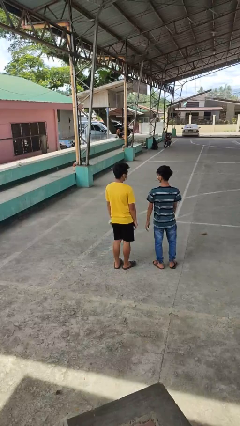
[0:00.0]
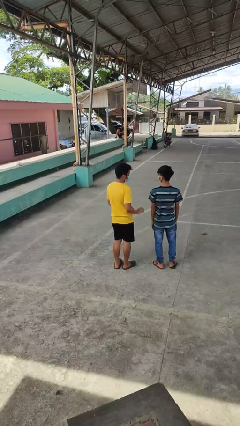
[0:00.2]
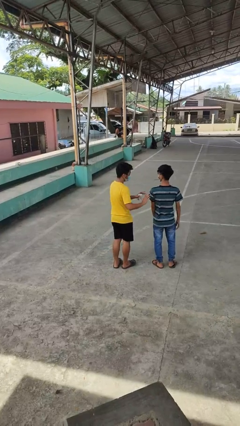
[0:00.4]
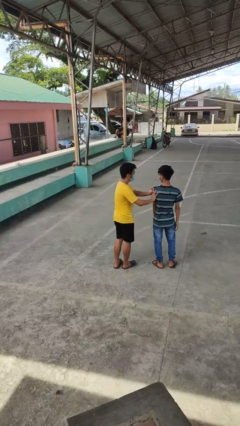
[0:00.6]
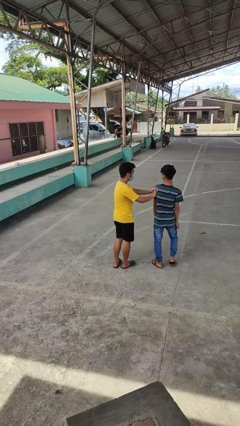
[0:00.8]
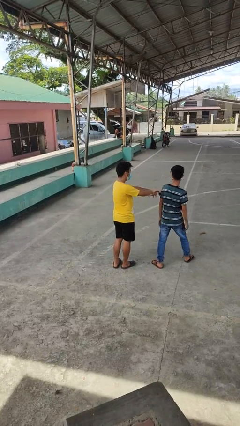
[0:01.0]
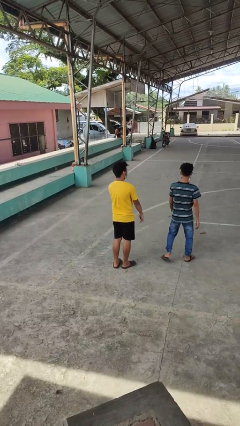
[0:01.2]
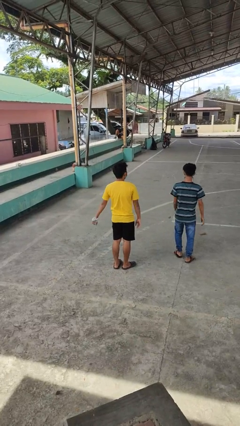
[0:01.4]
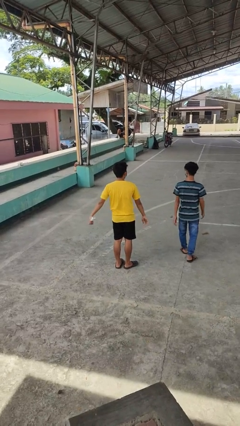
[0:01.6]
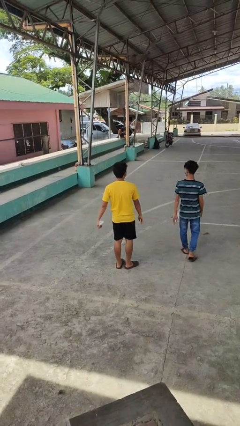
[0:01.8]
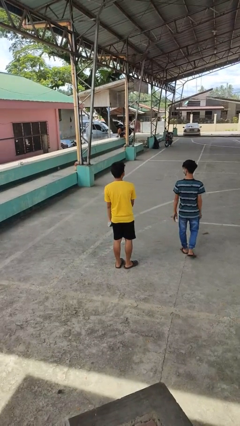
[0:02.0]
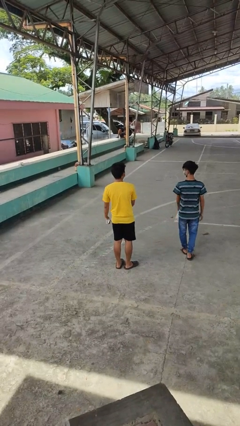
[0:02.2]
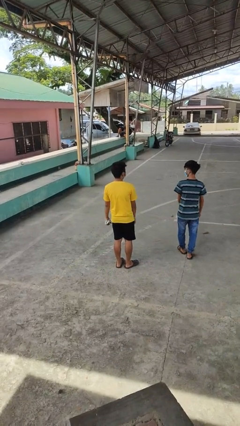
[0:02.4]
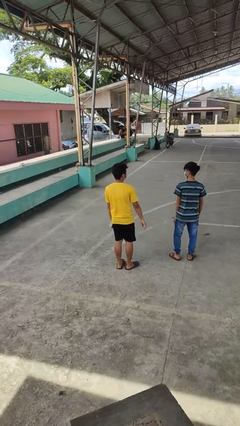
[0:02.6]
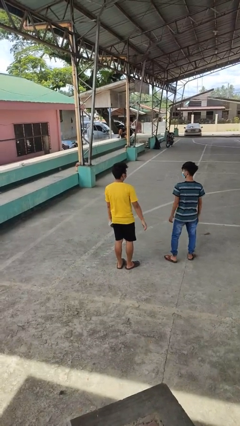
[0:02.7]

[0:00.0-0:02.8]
person shoves person

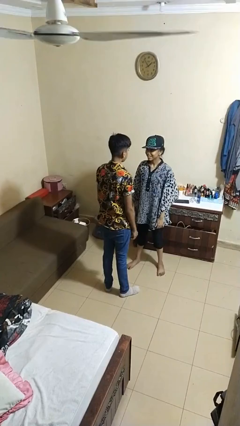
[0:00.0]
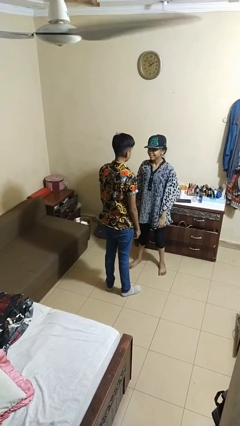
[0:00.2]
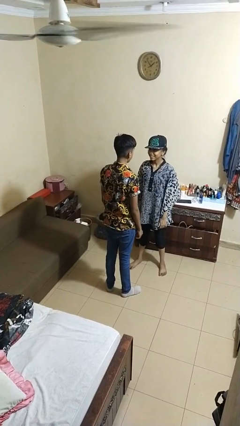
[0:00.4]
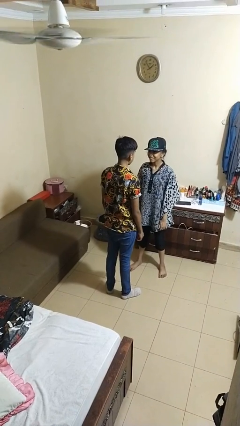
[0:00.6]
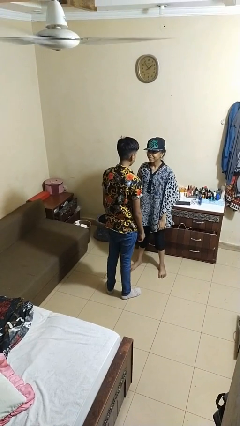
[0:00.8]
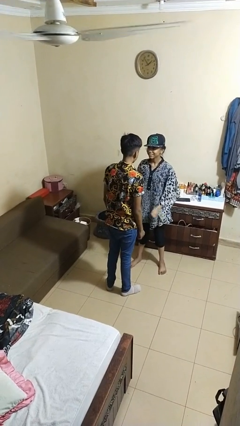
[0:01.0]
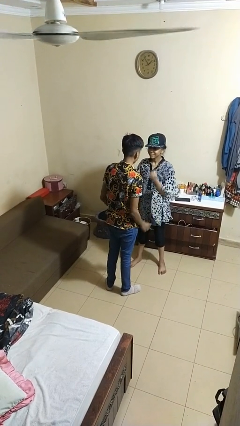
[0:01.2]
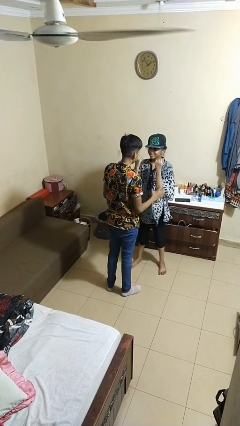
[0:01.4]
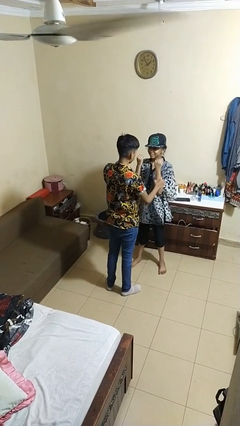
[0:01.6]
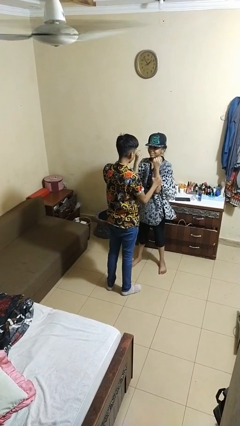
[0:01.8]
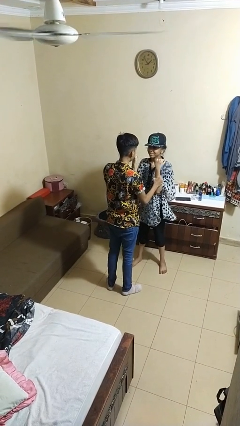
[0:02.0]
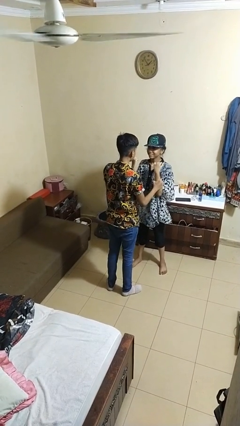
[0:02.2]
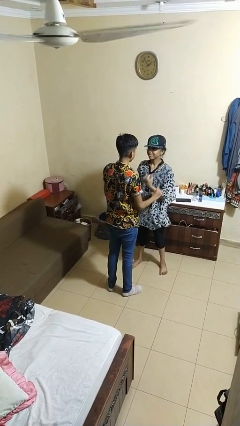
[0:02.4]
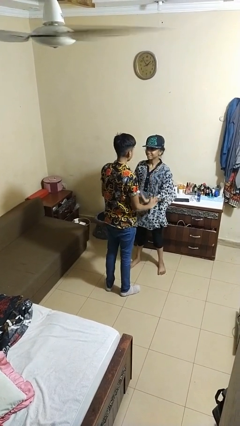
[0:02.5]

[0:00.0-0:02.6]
person grabs person by forearm

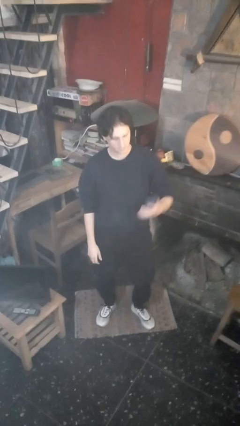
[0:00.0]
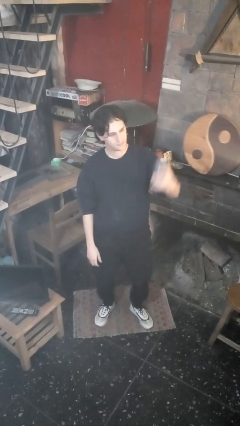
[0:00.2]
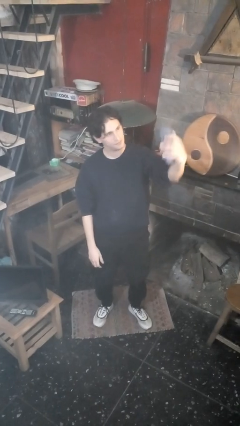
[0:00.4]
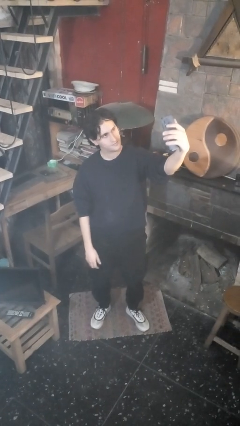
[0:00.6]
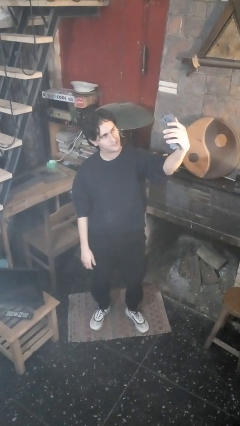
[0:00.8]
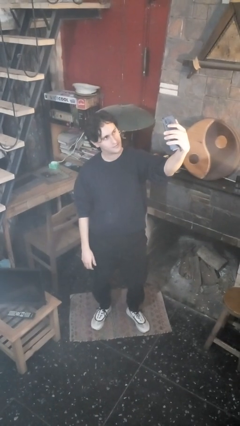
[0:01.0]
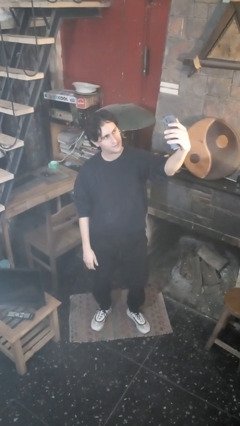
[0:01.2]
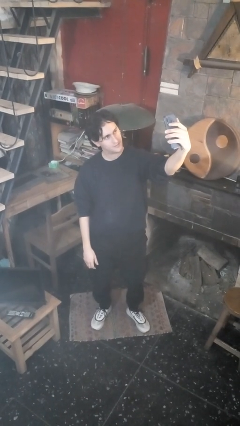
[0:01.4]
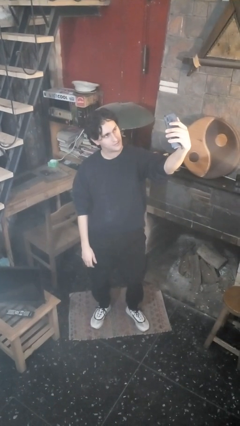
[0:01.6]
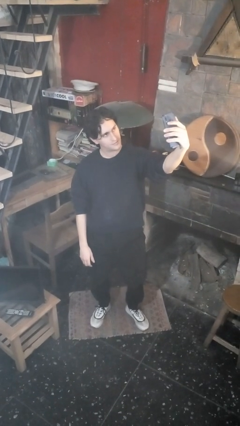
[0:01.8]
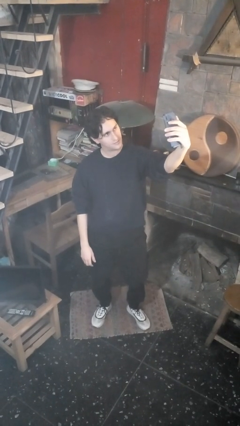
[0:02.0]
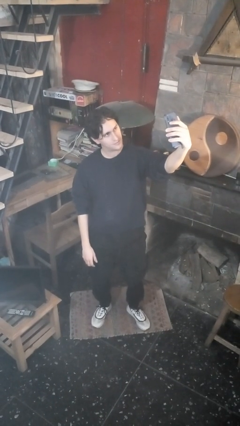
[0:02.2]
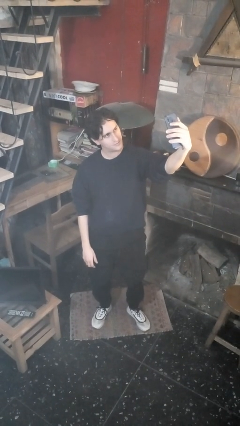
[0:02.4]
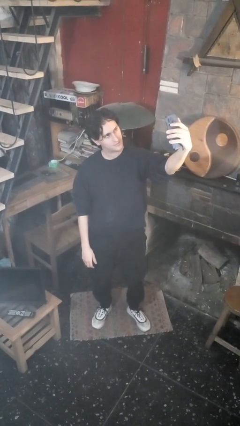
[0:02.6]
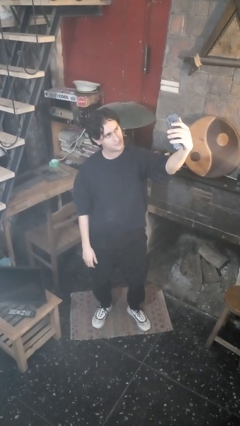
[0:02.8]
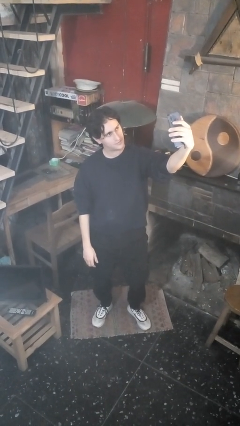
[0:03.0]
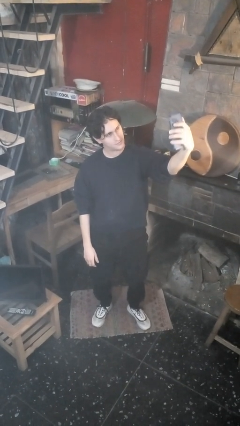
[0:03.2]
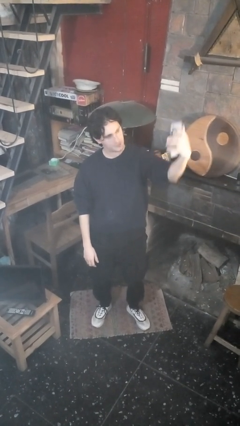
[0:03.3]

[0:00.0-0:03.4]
person takes selfie

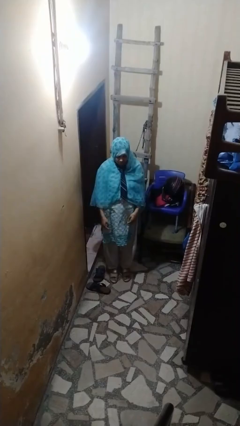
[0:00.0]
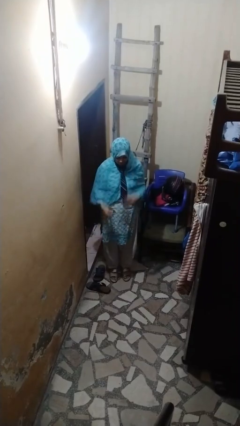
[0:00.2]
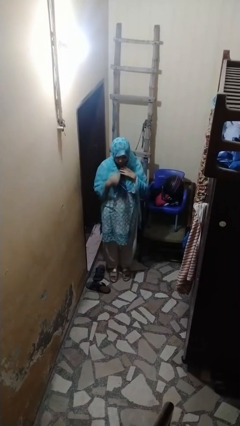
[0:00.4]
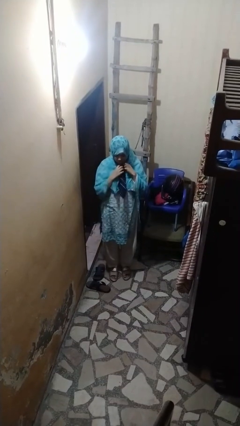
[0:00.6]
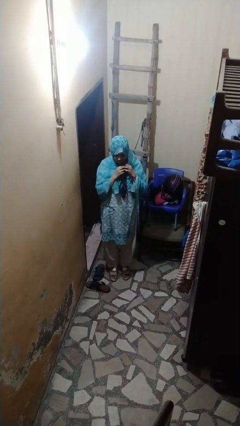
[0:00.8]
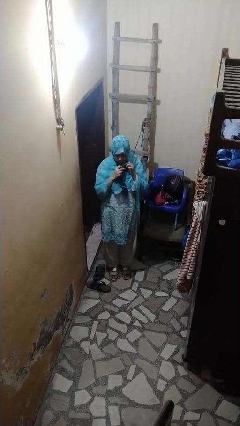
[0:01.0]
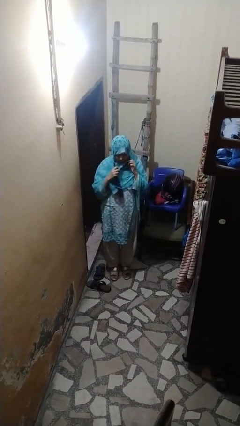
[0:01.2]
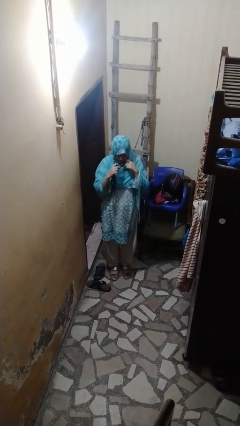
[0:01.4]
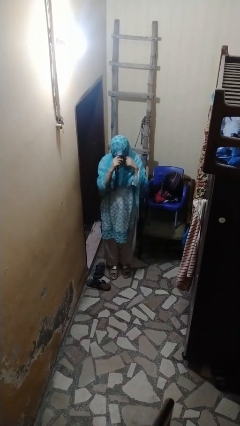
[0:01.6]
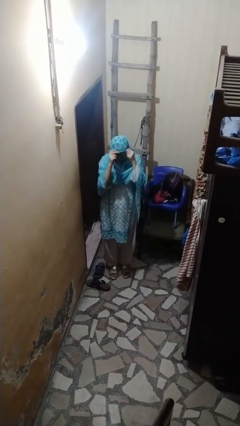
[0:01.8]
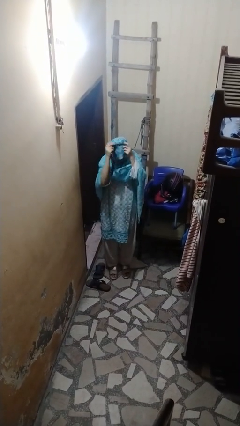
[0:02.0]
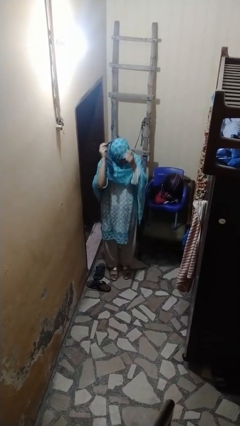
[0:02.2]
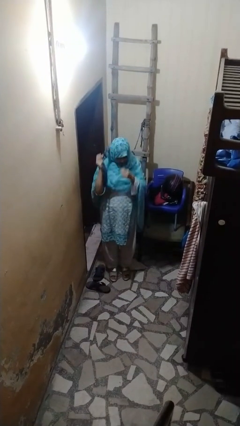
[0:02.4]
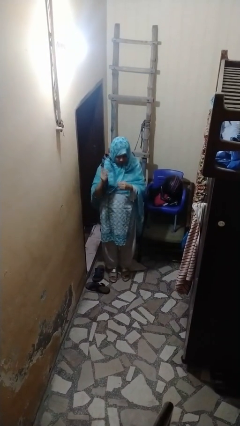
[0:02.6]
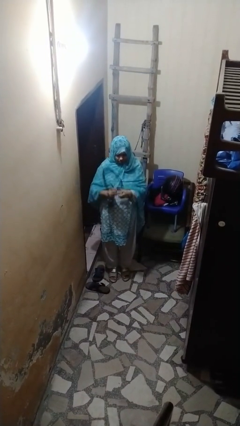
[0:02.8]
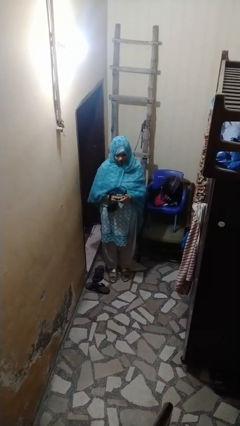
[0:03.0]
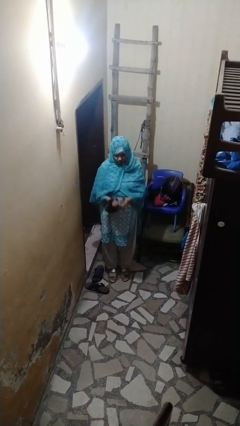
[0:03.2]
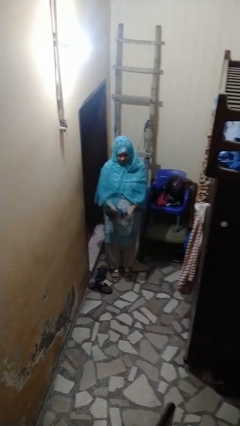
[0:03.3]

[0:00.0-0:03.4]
person takes off necktie

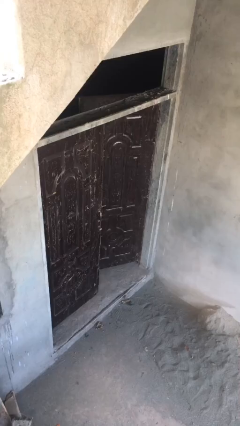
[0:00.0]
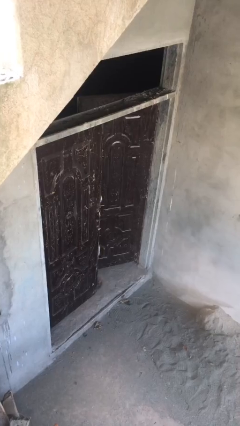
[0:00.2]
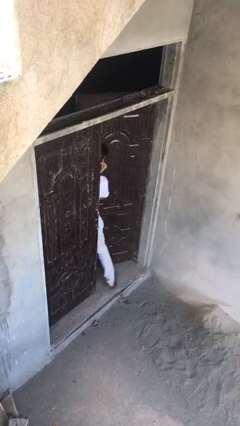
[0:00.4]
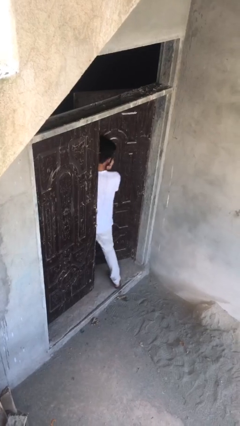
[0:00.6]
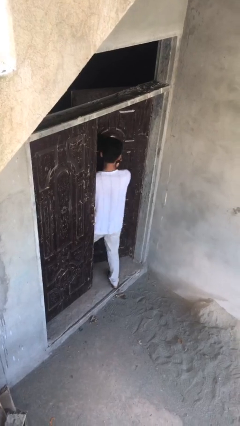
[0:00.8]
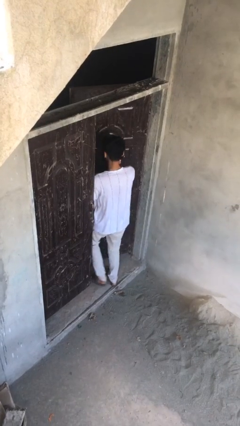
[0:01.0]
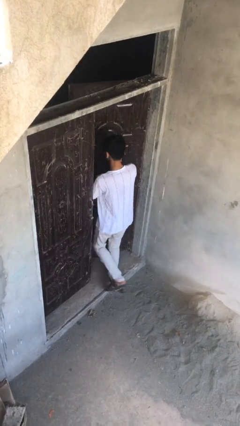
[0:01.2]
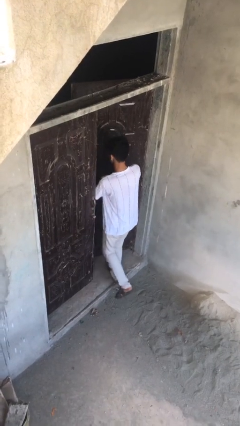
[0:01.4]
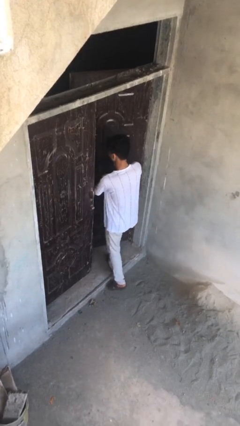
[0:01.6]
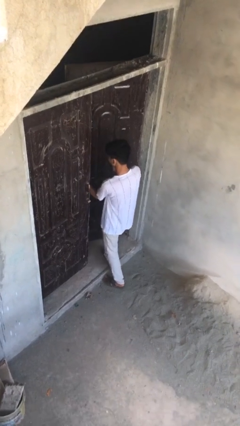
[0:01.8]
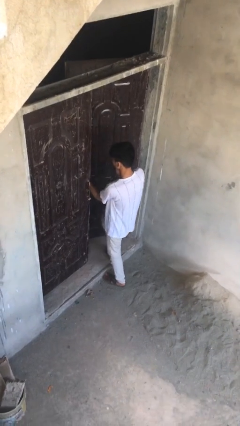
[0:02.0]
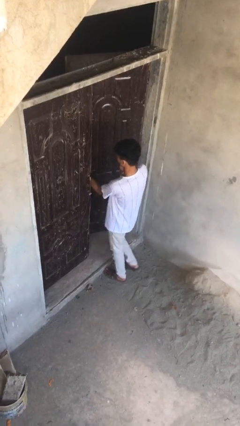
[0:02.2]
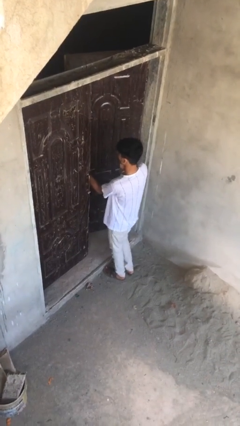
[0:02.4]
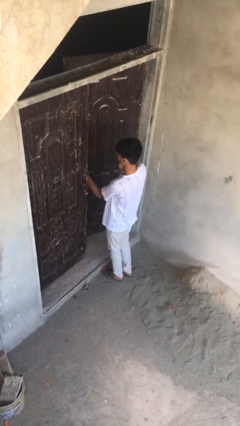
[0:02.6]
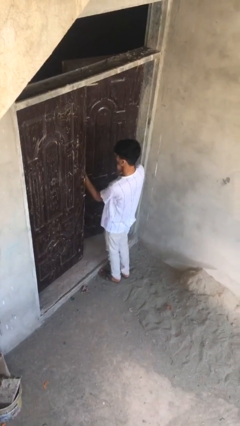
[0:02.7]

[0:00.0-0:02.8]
person enters scene through structure

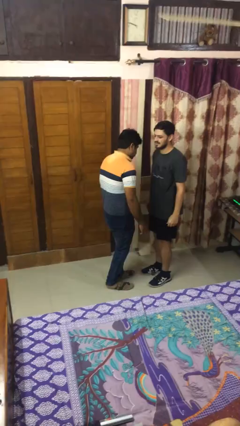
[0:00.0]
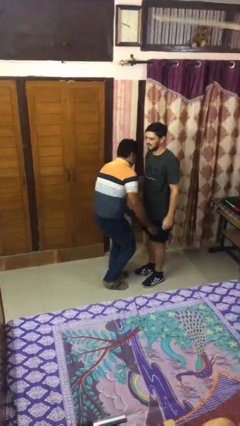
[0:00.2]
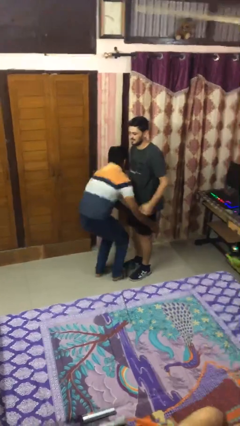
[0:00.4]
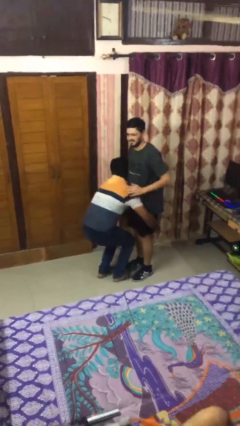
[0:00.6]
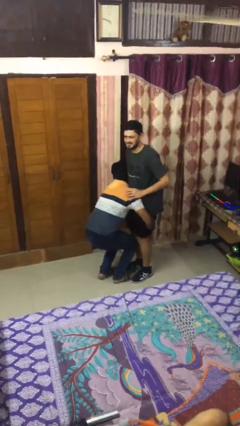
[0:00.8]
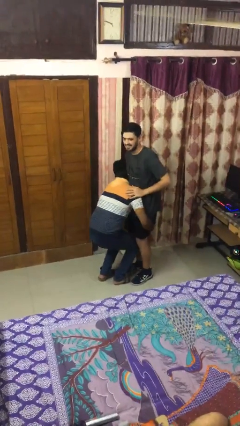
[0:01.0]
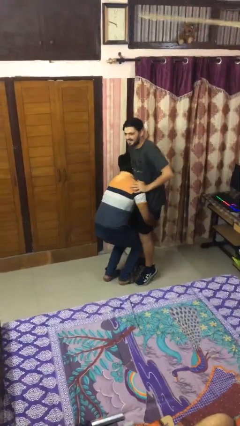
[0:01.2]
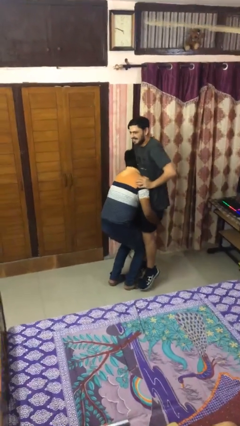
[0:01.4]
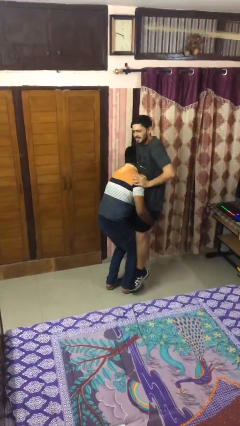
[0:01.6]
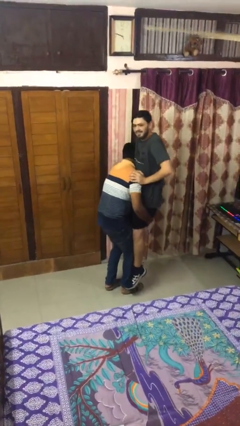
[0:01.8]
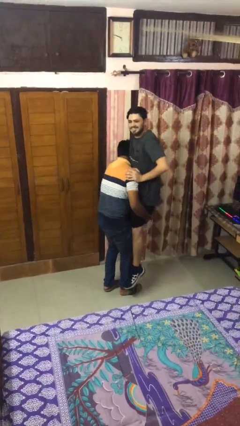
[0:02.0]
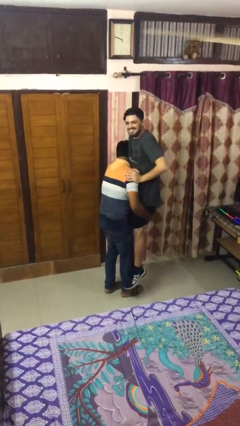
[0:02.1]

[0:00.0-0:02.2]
person picks up person

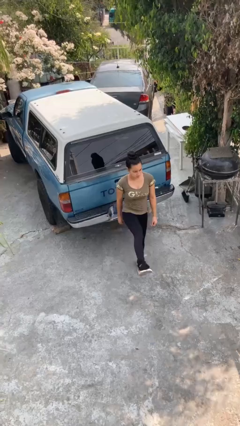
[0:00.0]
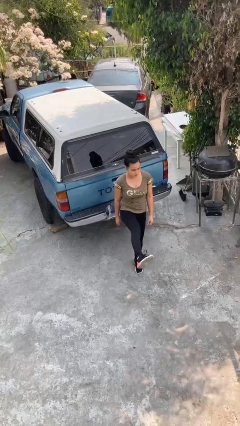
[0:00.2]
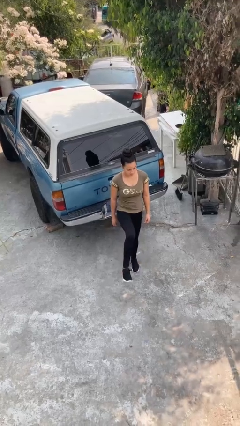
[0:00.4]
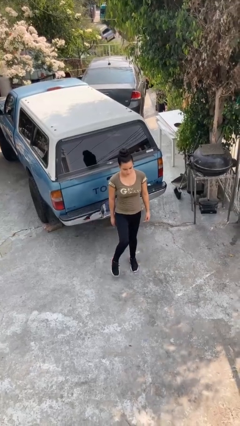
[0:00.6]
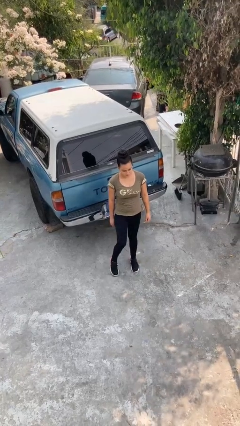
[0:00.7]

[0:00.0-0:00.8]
person karate kicks
